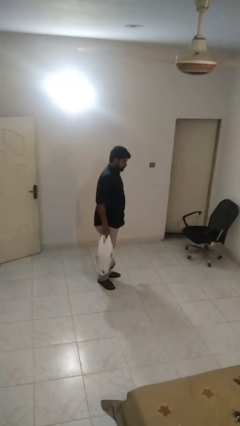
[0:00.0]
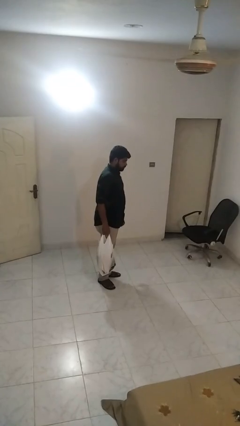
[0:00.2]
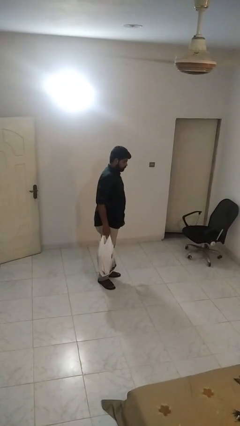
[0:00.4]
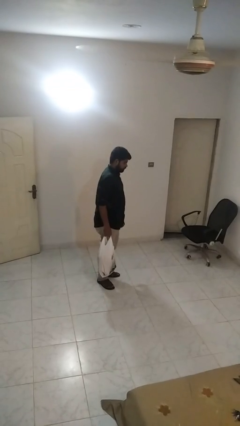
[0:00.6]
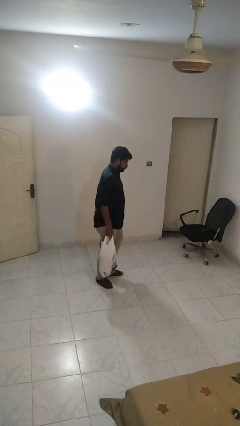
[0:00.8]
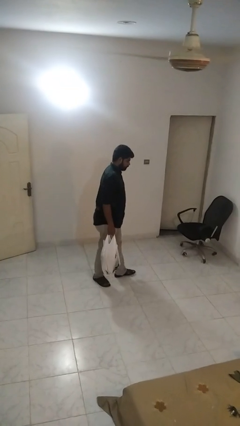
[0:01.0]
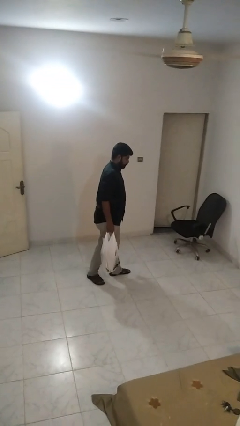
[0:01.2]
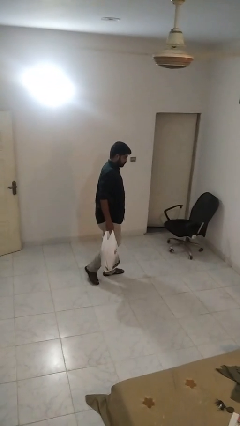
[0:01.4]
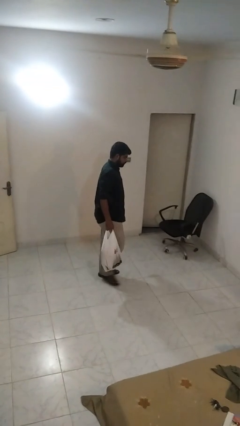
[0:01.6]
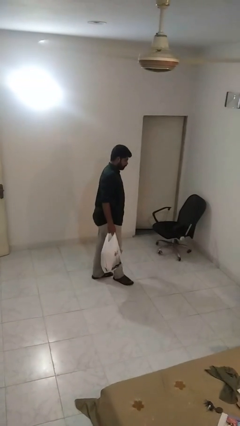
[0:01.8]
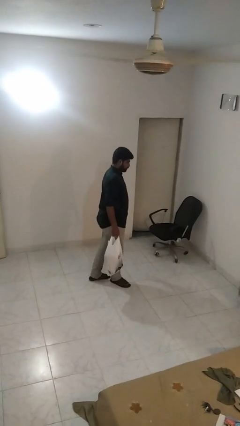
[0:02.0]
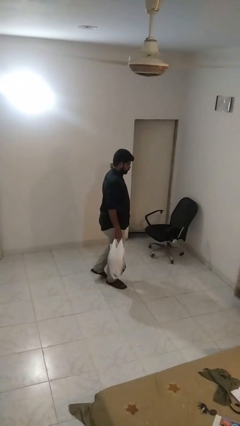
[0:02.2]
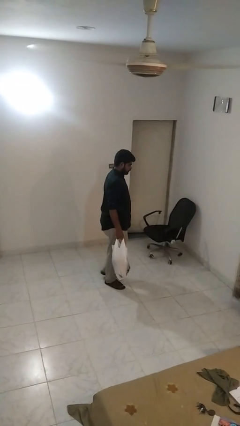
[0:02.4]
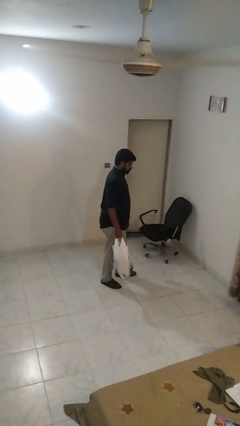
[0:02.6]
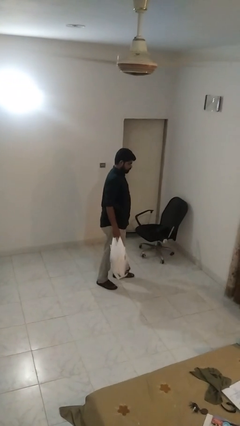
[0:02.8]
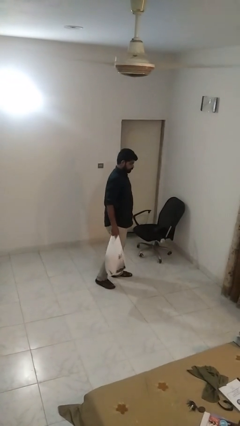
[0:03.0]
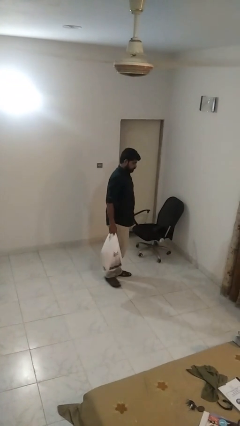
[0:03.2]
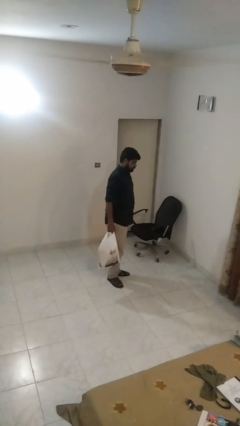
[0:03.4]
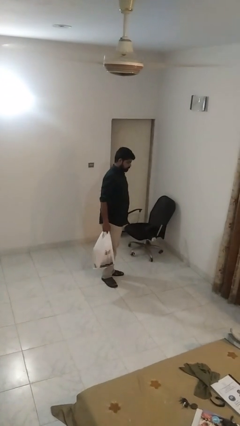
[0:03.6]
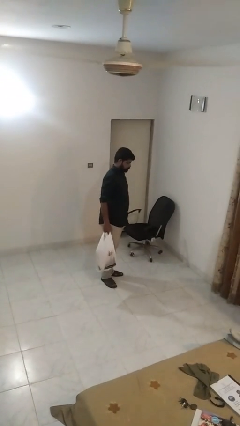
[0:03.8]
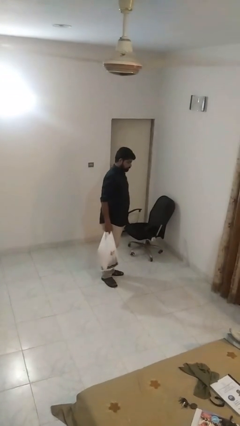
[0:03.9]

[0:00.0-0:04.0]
person carries groceries

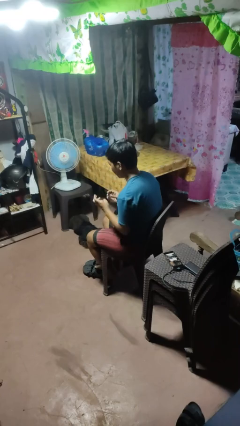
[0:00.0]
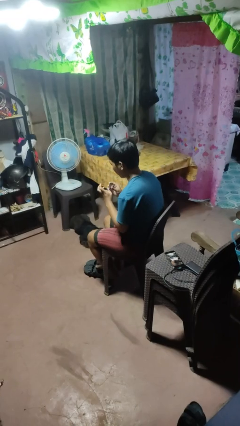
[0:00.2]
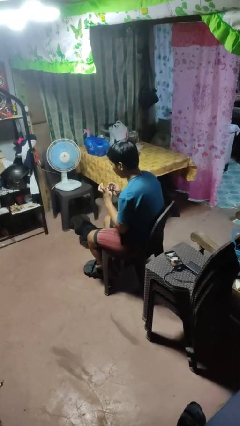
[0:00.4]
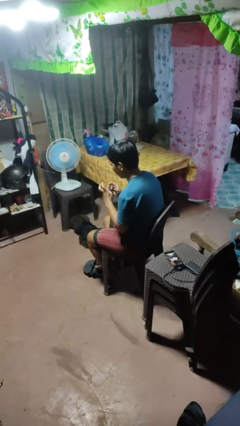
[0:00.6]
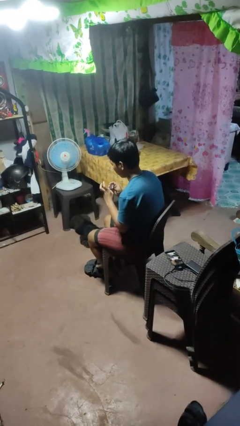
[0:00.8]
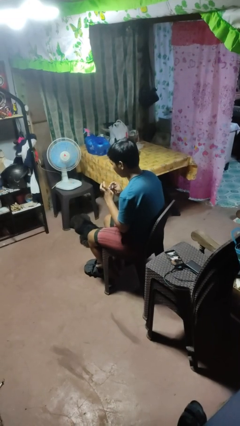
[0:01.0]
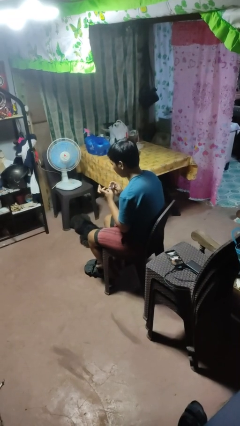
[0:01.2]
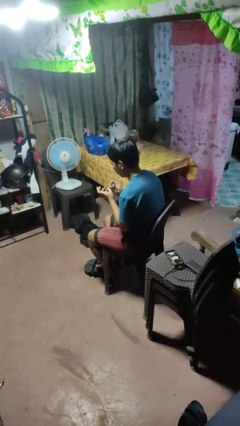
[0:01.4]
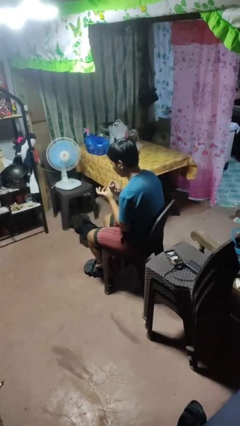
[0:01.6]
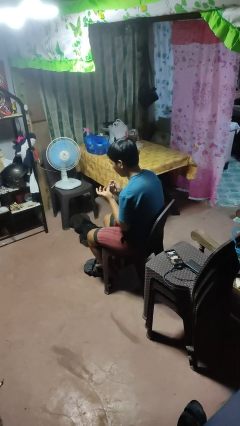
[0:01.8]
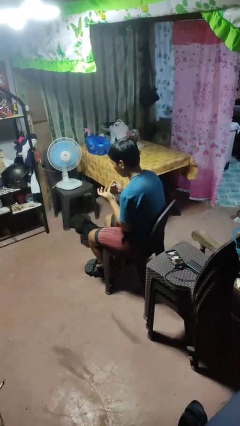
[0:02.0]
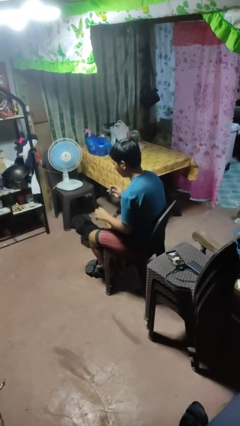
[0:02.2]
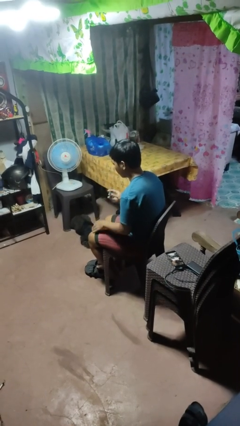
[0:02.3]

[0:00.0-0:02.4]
person clips fingernails

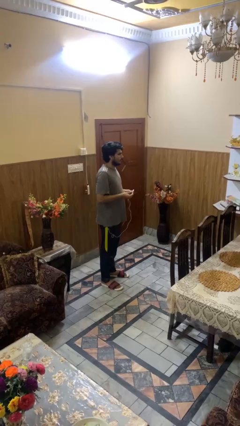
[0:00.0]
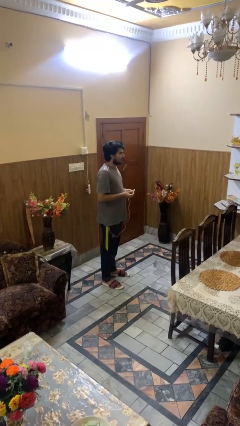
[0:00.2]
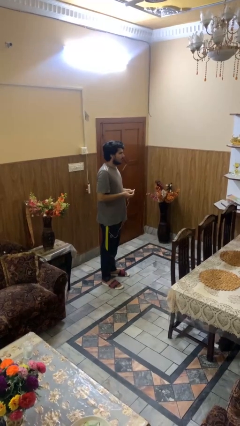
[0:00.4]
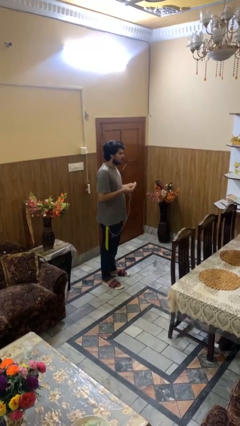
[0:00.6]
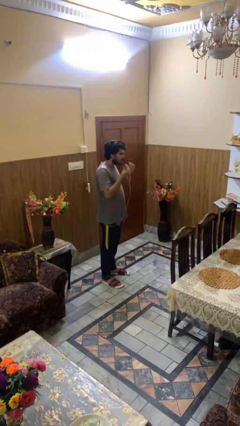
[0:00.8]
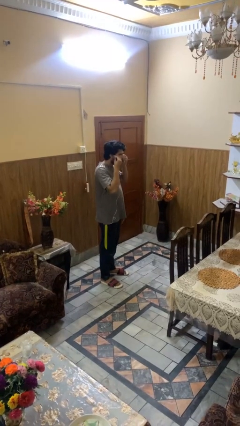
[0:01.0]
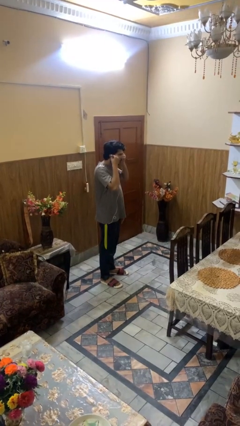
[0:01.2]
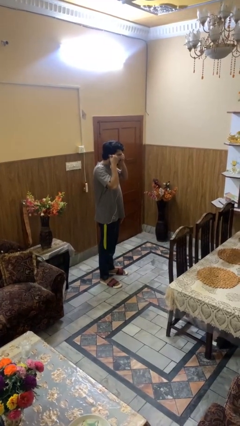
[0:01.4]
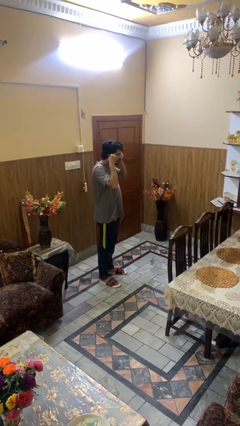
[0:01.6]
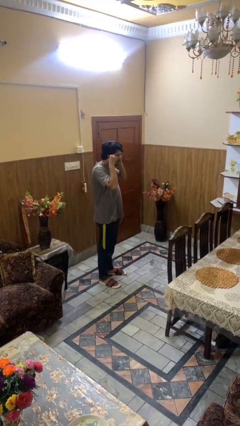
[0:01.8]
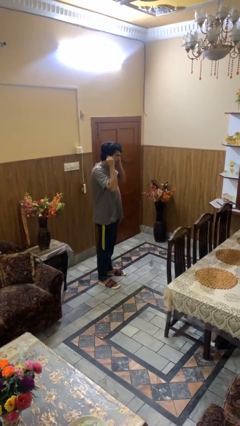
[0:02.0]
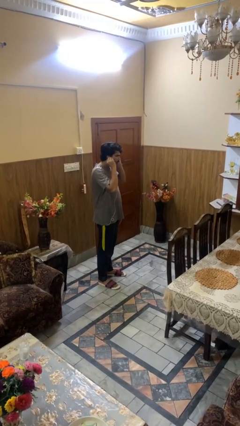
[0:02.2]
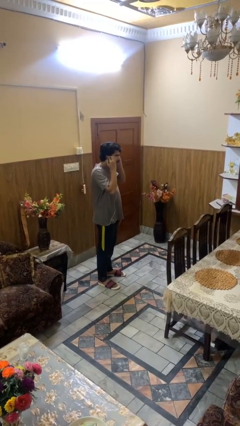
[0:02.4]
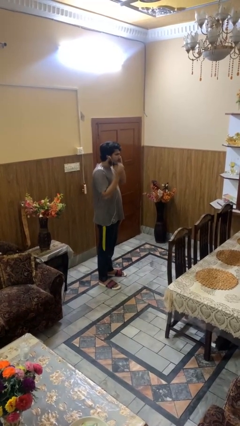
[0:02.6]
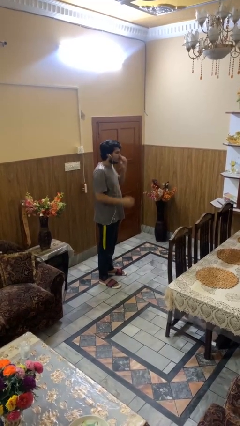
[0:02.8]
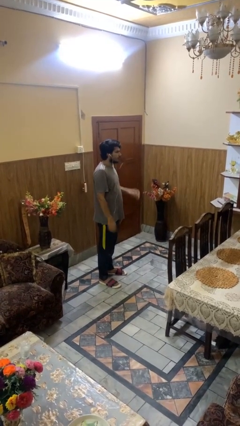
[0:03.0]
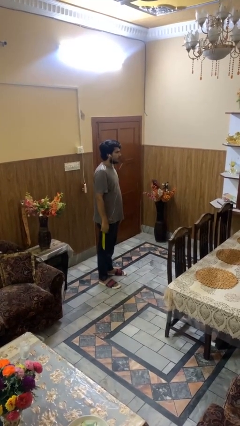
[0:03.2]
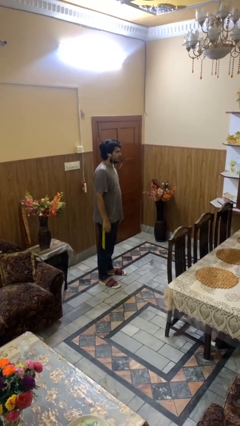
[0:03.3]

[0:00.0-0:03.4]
person puts on headphones

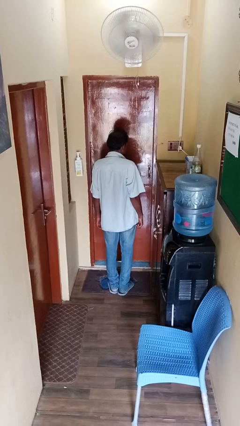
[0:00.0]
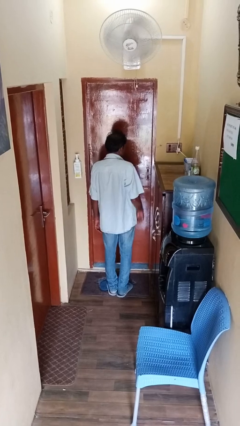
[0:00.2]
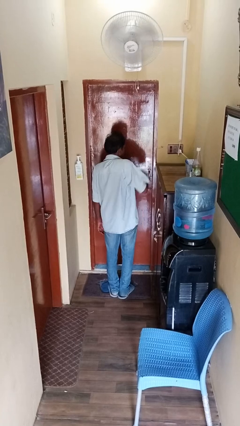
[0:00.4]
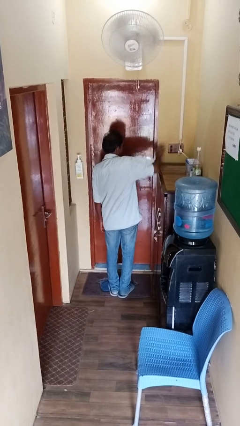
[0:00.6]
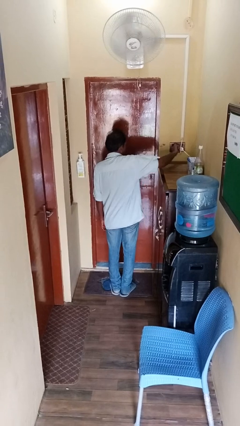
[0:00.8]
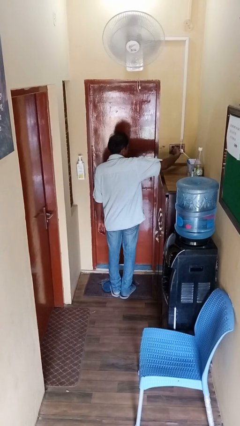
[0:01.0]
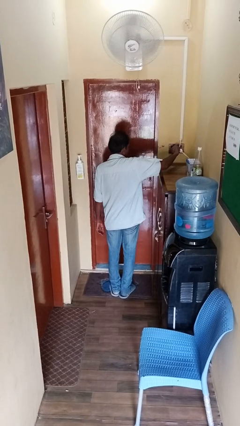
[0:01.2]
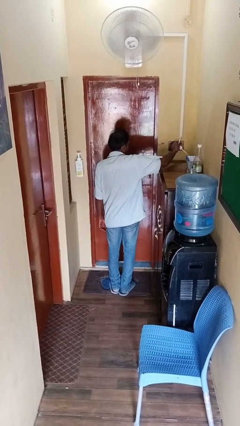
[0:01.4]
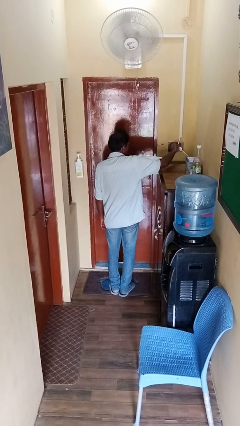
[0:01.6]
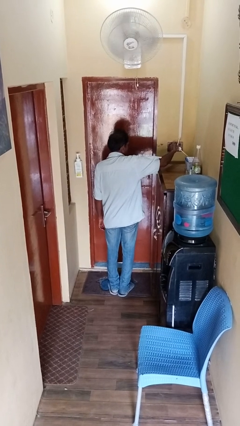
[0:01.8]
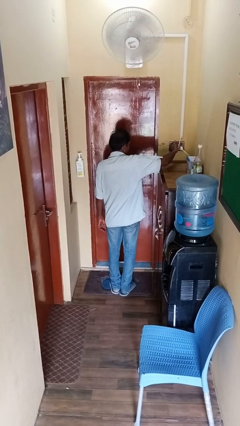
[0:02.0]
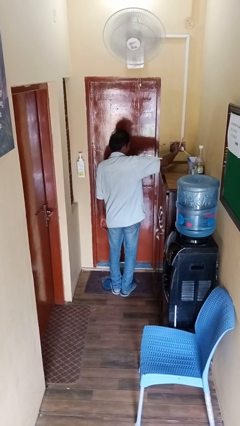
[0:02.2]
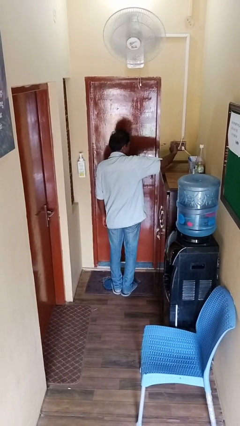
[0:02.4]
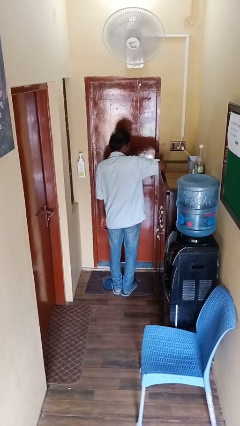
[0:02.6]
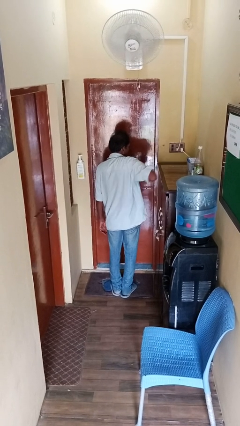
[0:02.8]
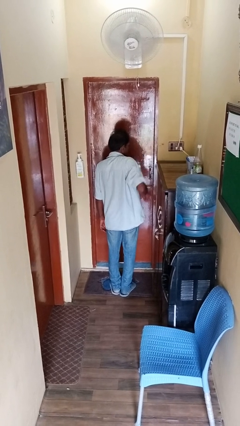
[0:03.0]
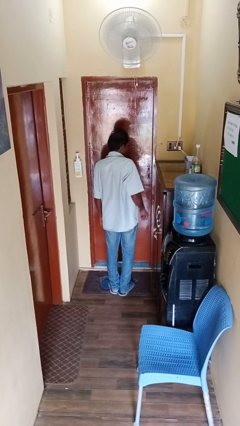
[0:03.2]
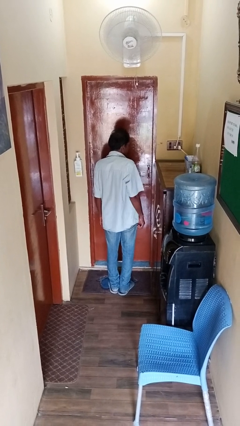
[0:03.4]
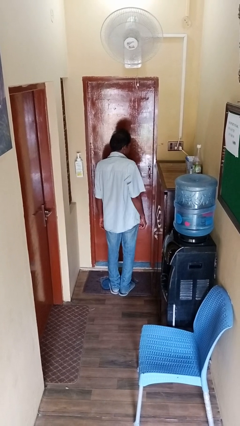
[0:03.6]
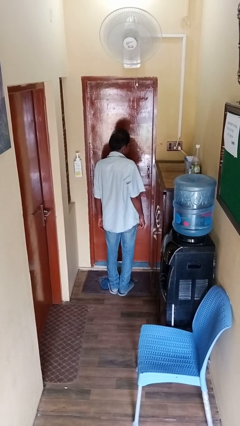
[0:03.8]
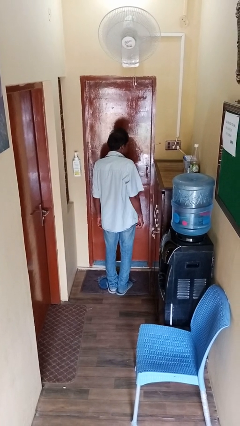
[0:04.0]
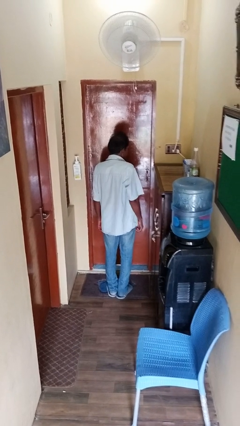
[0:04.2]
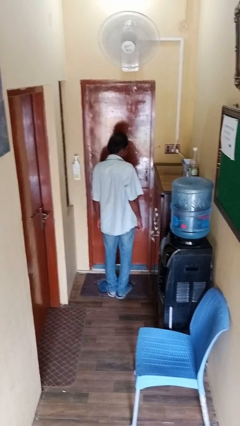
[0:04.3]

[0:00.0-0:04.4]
person turns on fan

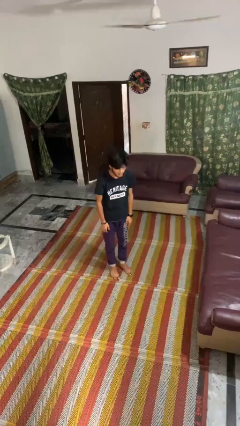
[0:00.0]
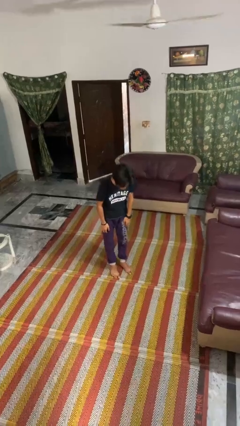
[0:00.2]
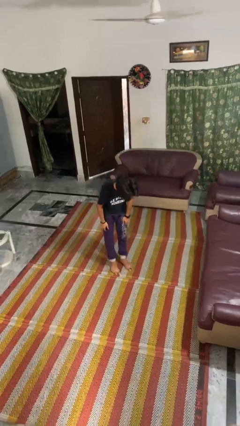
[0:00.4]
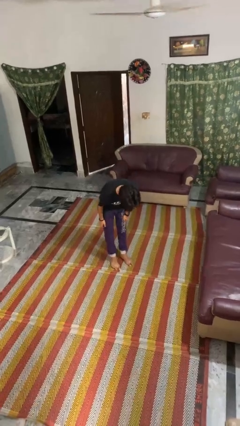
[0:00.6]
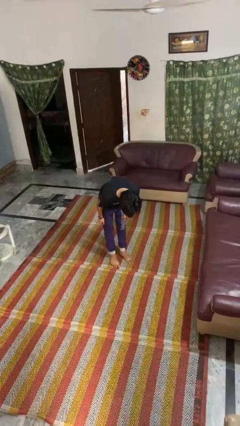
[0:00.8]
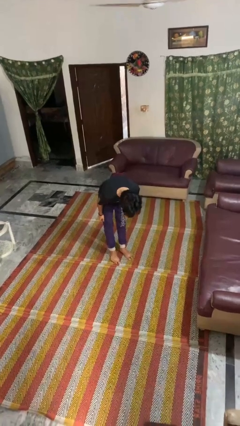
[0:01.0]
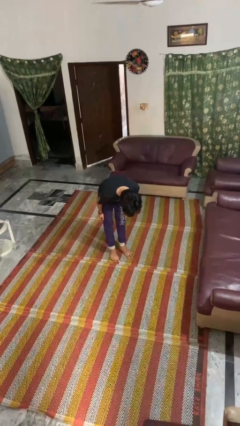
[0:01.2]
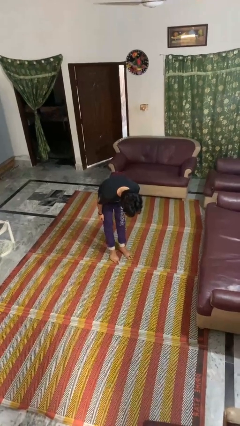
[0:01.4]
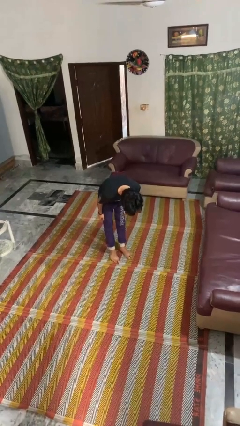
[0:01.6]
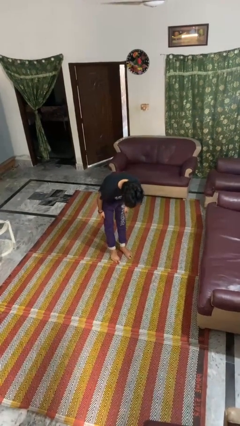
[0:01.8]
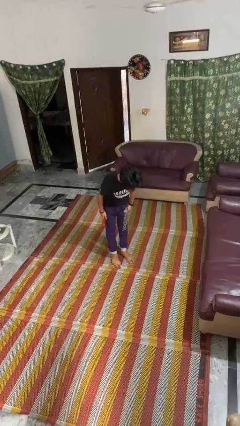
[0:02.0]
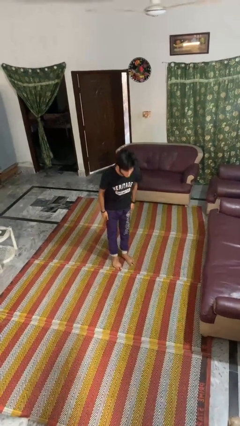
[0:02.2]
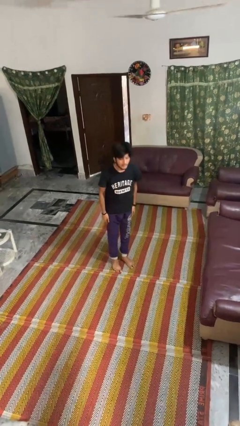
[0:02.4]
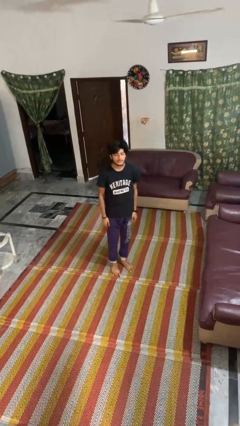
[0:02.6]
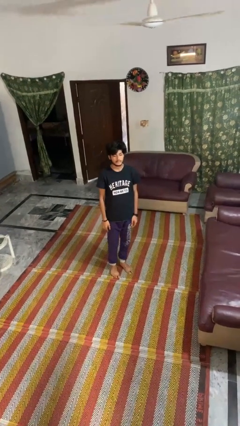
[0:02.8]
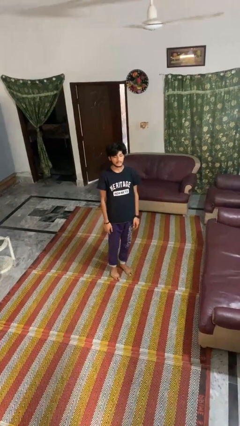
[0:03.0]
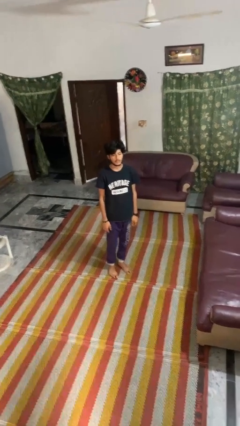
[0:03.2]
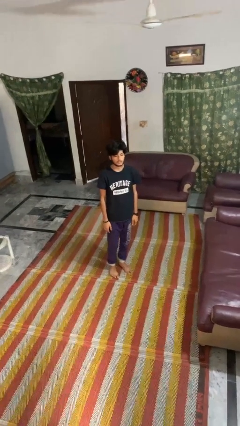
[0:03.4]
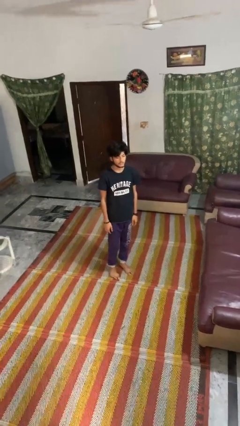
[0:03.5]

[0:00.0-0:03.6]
person bows
